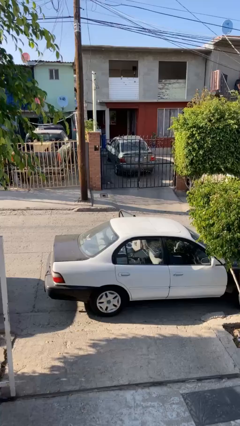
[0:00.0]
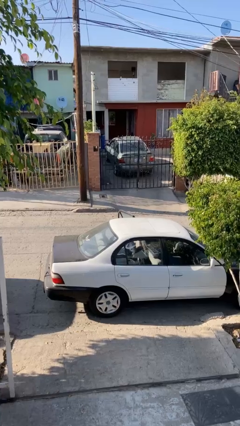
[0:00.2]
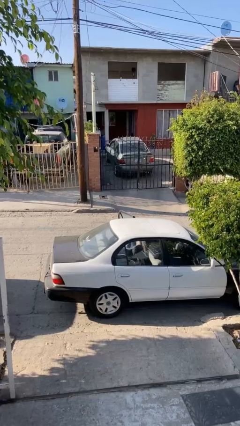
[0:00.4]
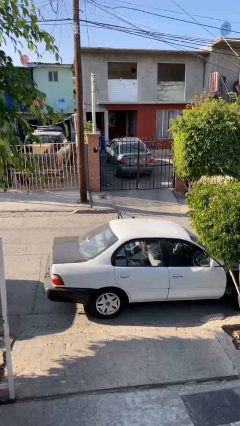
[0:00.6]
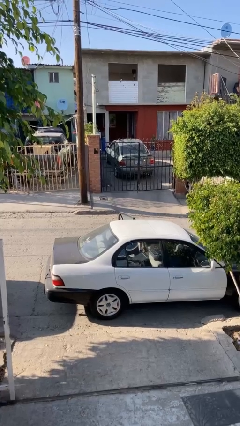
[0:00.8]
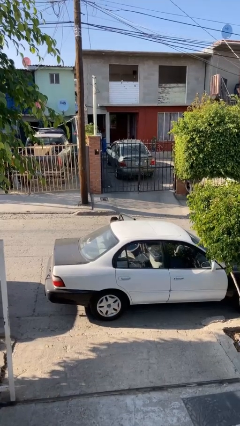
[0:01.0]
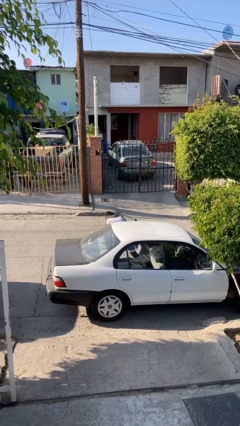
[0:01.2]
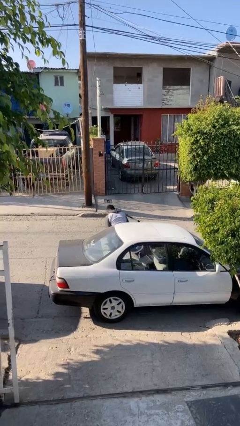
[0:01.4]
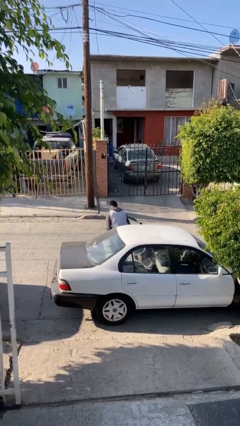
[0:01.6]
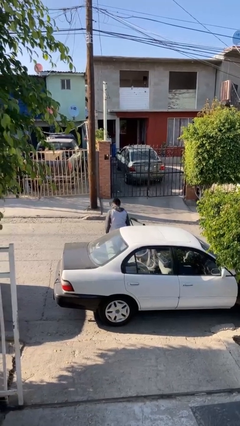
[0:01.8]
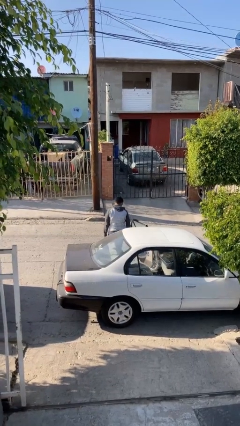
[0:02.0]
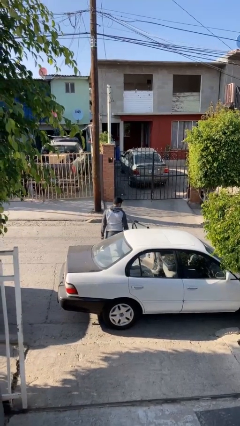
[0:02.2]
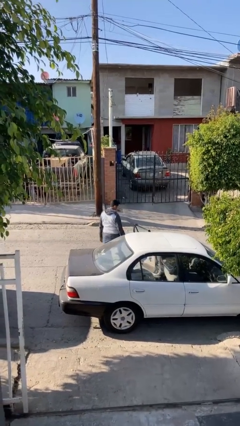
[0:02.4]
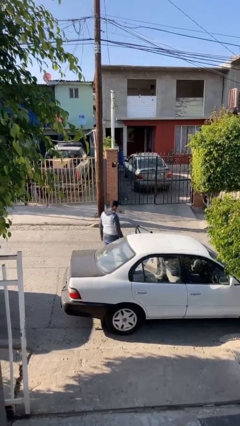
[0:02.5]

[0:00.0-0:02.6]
person exits car

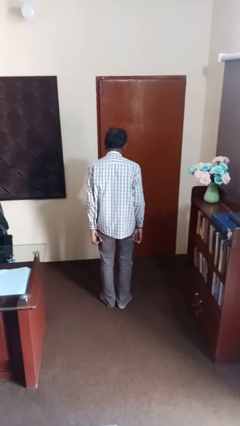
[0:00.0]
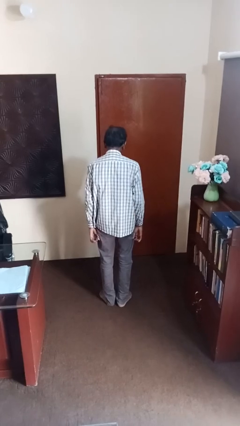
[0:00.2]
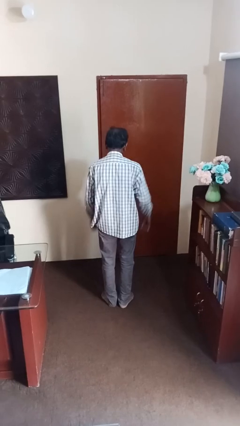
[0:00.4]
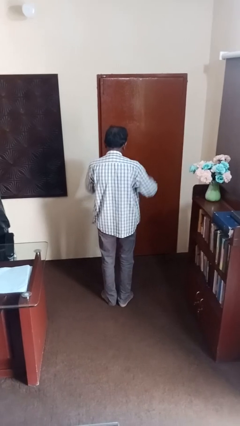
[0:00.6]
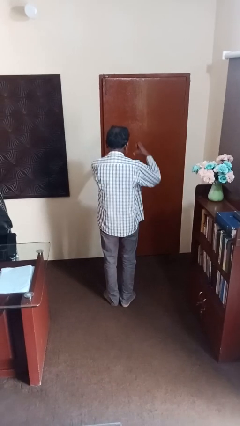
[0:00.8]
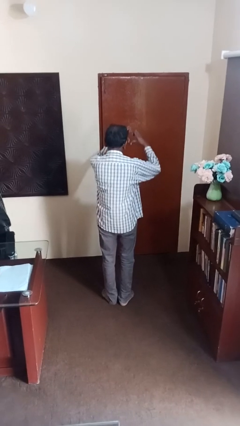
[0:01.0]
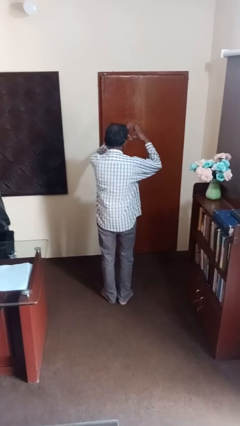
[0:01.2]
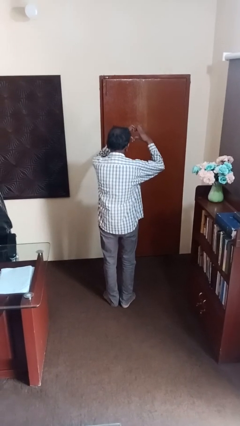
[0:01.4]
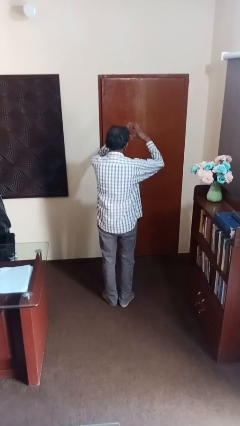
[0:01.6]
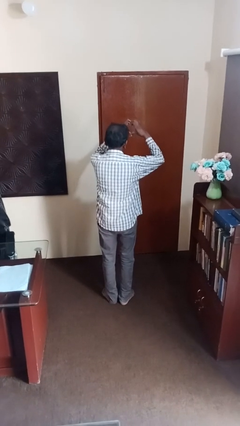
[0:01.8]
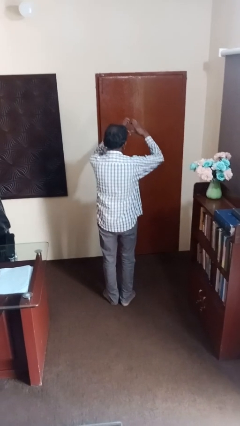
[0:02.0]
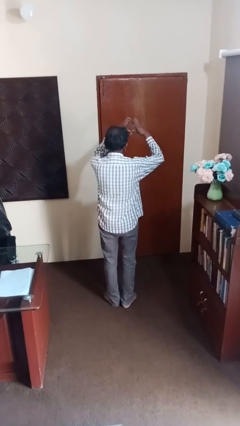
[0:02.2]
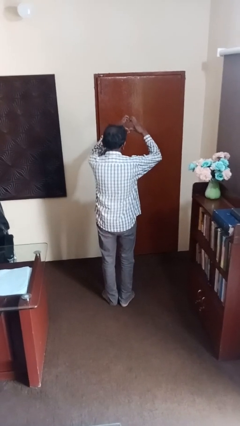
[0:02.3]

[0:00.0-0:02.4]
person gestures heart

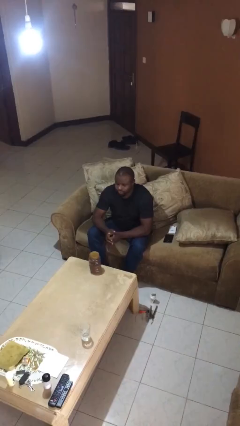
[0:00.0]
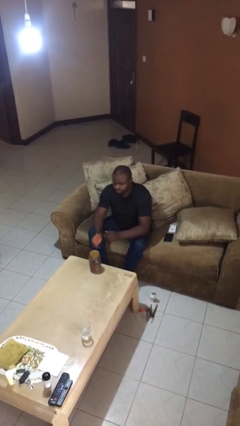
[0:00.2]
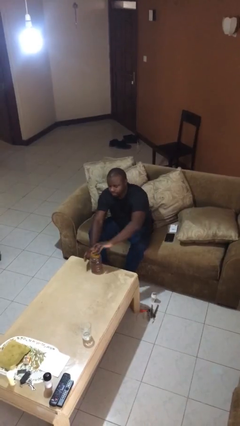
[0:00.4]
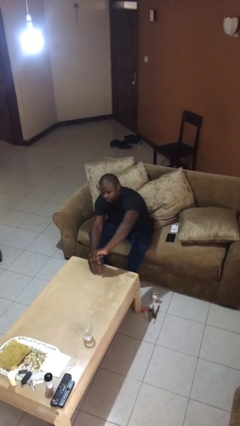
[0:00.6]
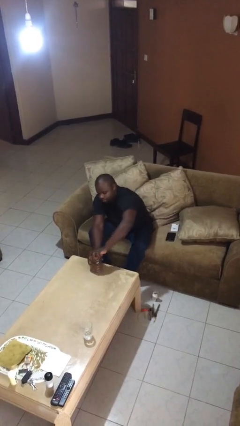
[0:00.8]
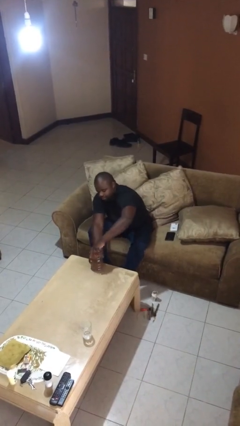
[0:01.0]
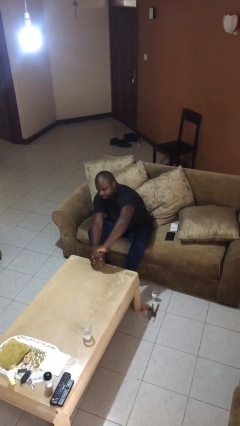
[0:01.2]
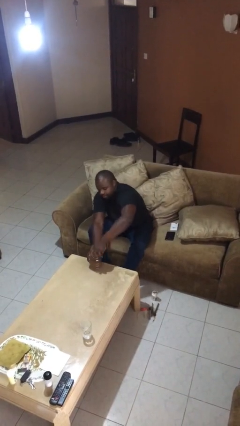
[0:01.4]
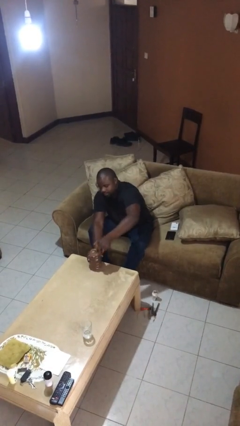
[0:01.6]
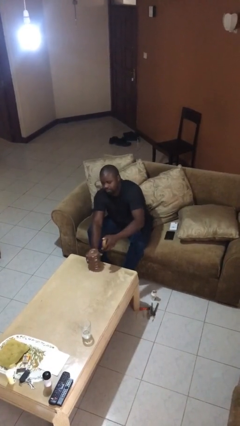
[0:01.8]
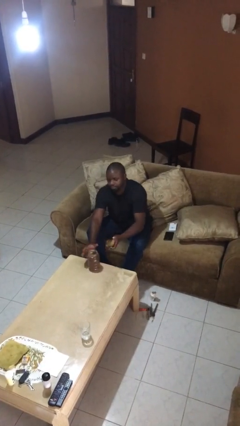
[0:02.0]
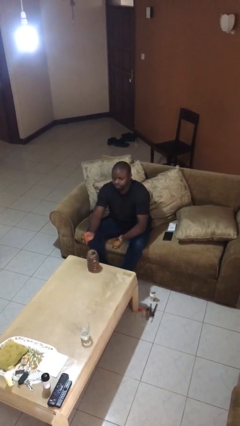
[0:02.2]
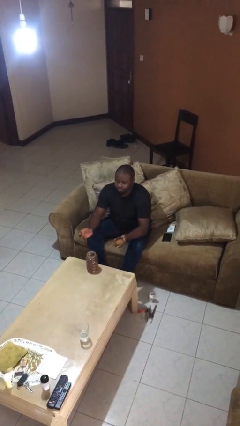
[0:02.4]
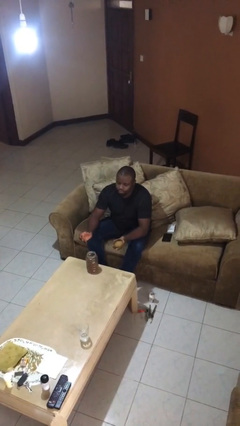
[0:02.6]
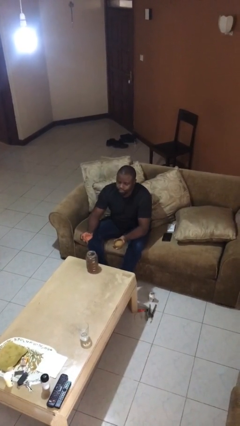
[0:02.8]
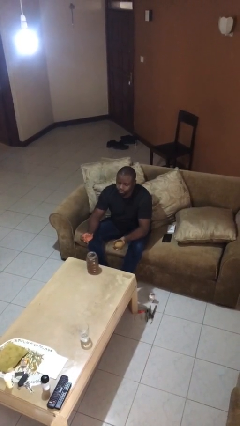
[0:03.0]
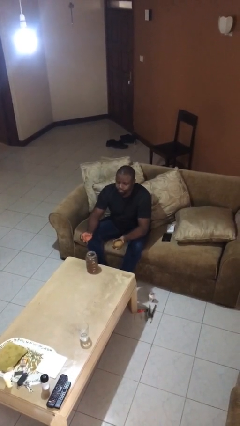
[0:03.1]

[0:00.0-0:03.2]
person opens jar

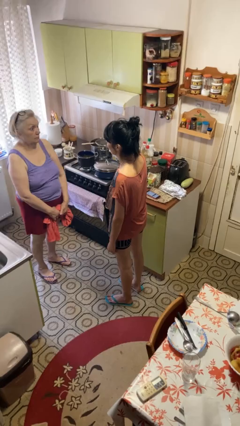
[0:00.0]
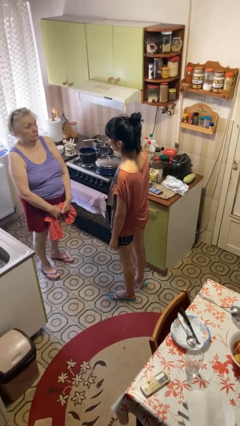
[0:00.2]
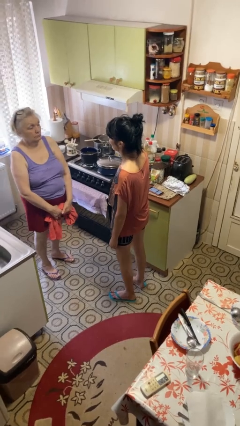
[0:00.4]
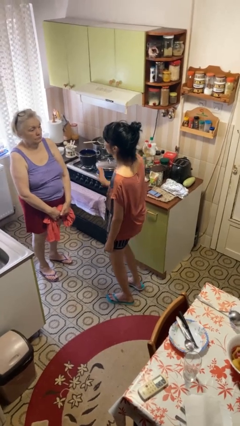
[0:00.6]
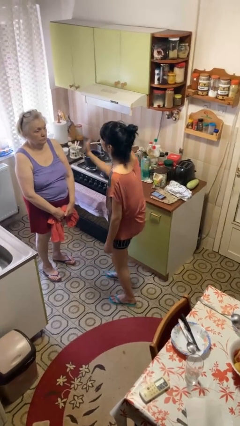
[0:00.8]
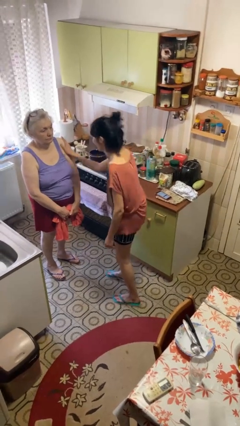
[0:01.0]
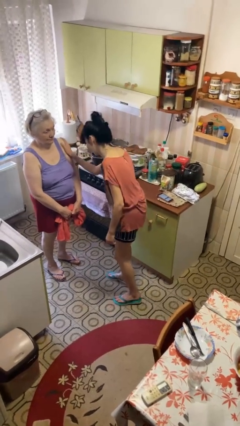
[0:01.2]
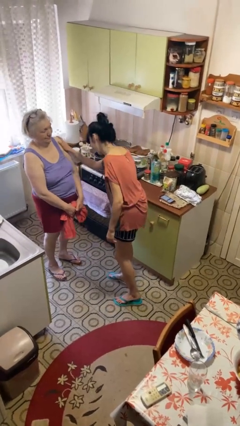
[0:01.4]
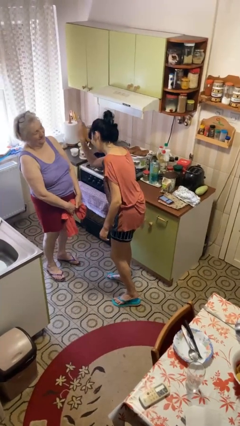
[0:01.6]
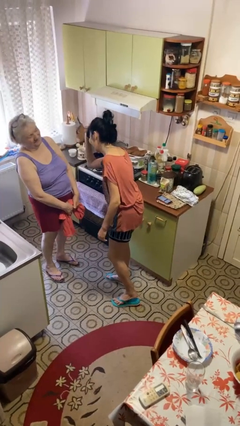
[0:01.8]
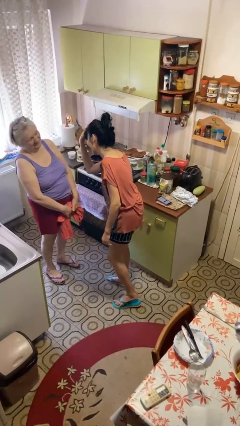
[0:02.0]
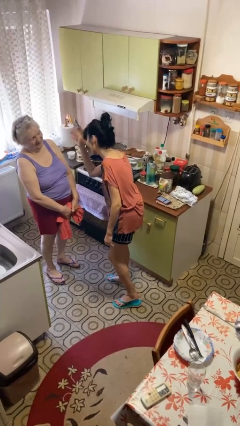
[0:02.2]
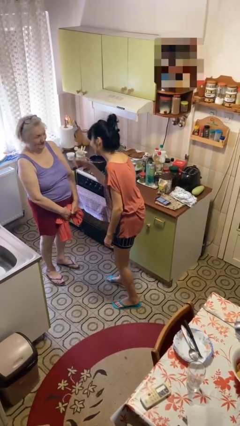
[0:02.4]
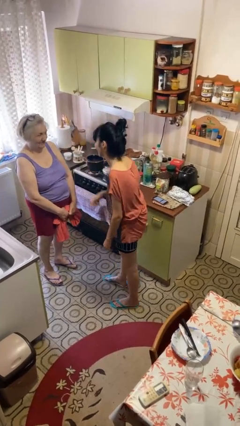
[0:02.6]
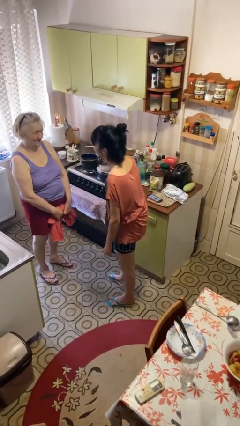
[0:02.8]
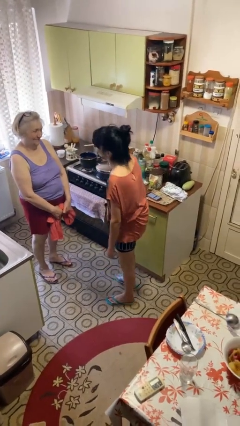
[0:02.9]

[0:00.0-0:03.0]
person shoves person

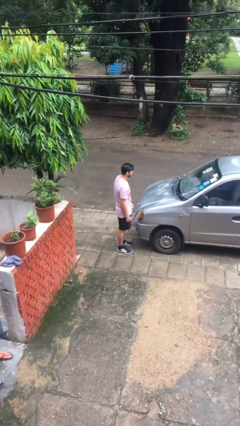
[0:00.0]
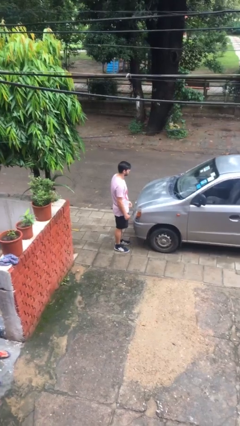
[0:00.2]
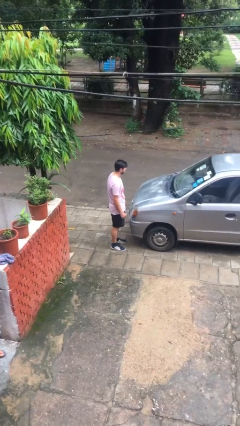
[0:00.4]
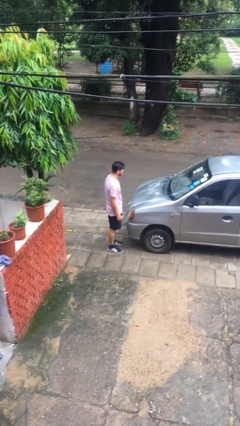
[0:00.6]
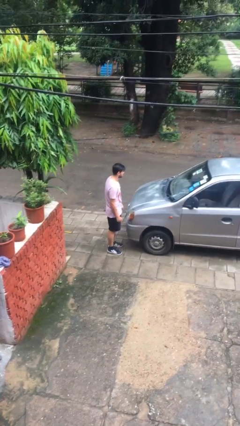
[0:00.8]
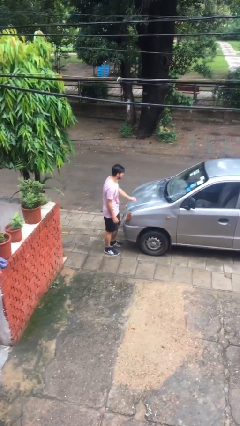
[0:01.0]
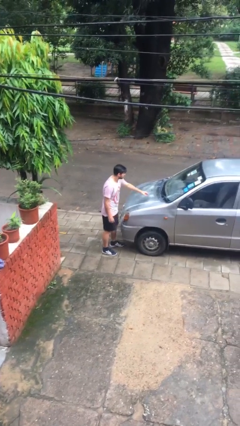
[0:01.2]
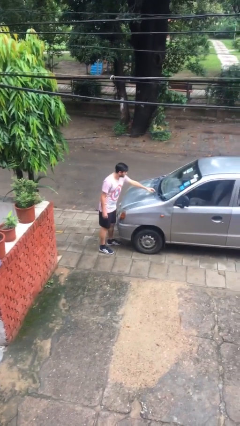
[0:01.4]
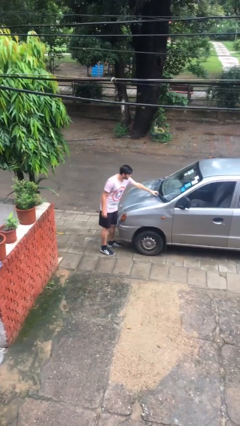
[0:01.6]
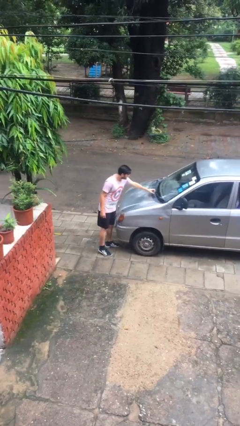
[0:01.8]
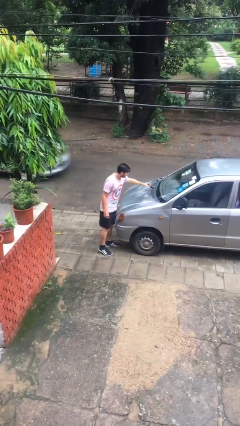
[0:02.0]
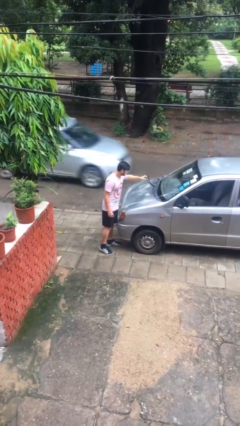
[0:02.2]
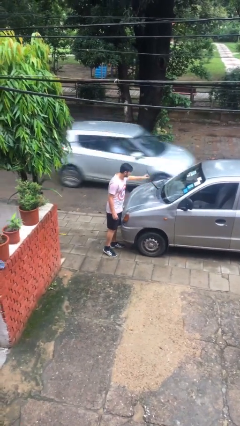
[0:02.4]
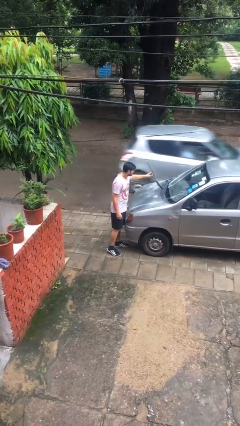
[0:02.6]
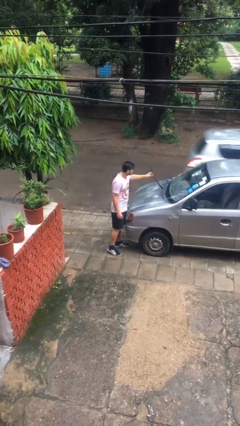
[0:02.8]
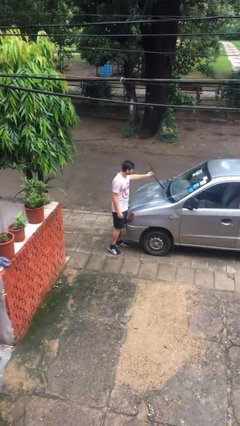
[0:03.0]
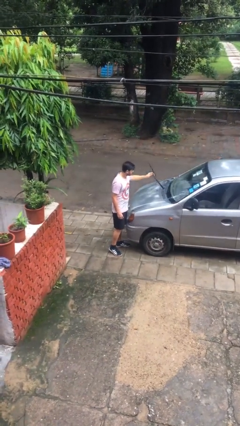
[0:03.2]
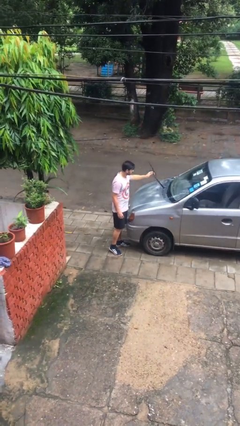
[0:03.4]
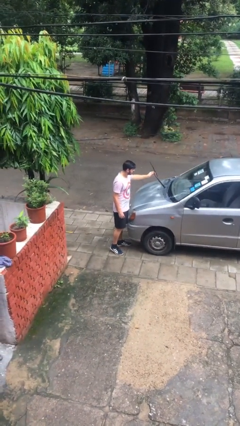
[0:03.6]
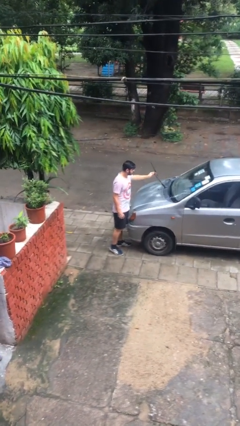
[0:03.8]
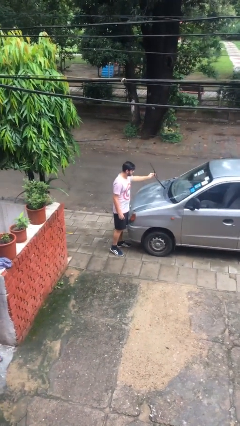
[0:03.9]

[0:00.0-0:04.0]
person flips up car wipers

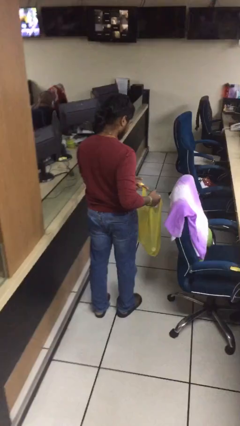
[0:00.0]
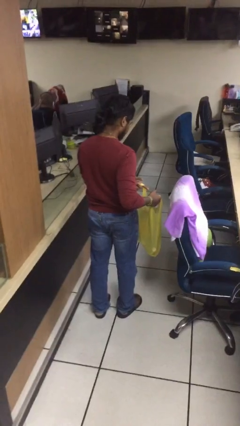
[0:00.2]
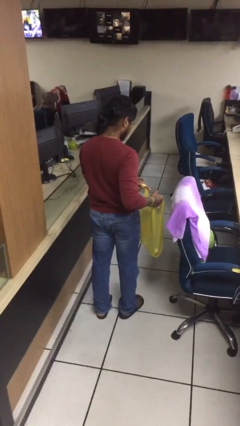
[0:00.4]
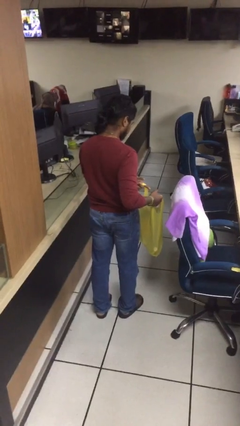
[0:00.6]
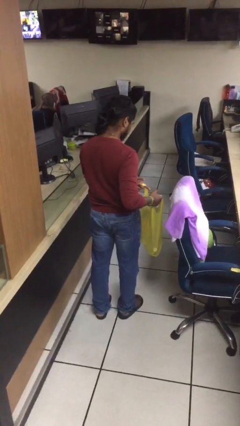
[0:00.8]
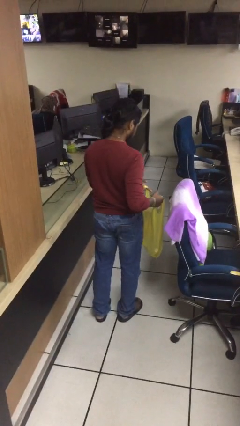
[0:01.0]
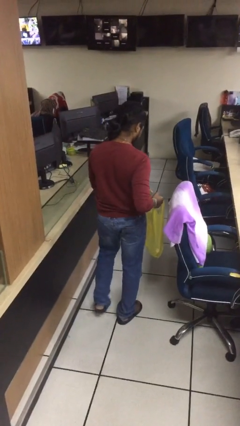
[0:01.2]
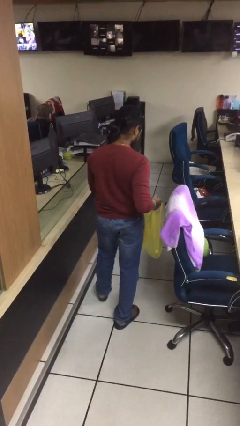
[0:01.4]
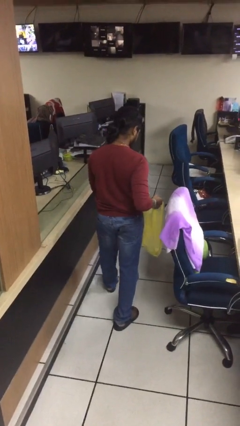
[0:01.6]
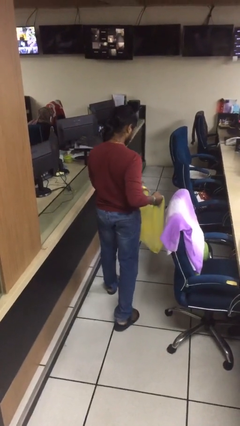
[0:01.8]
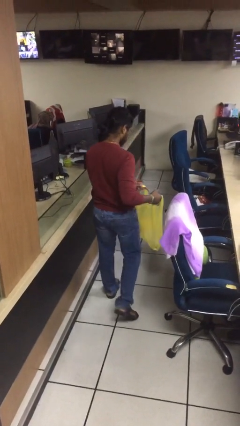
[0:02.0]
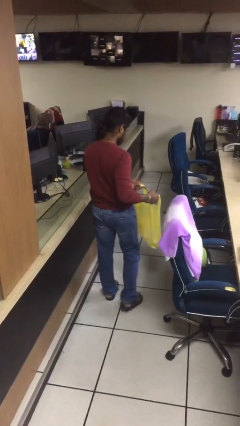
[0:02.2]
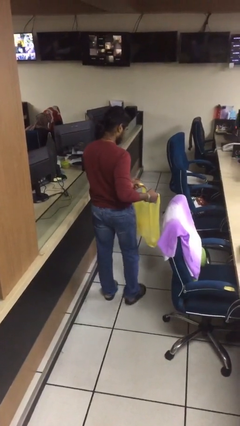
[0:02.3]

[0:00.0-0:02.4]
person carries groceries
